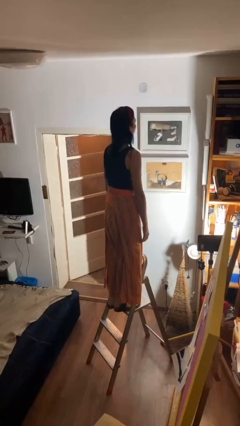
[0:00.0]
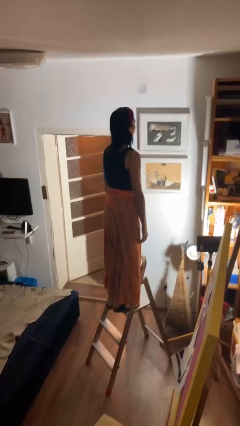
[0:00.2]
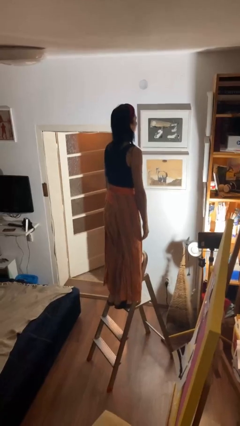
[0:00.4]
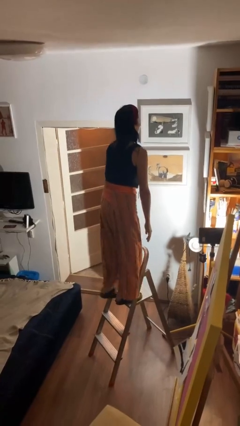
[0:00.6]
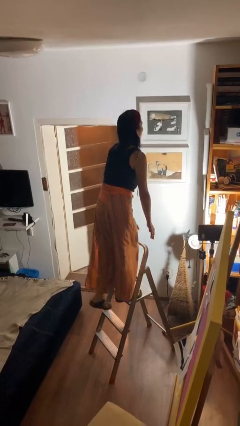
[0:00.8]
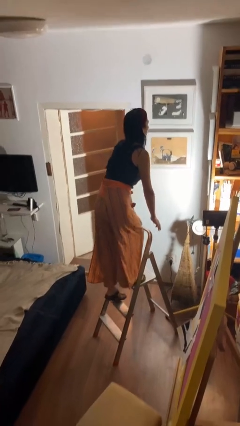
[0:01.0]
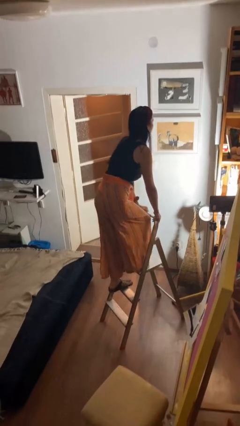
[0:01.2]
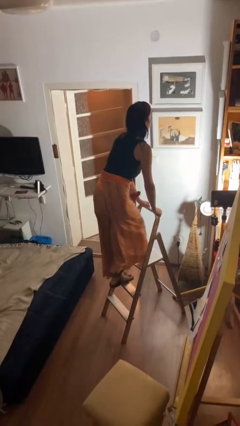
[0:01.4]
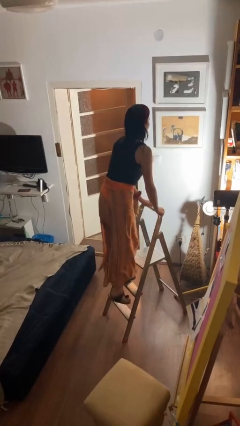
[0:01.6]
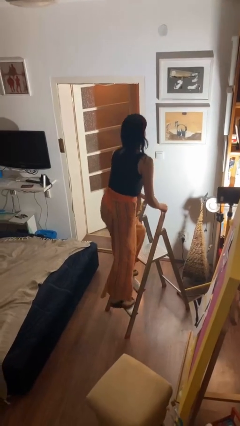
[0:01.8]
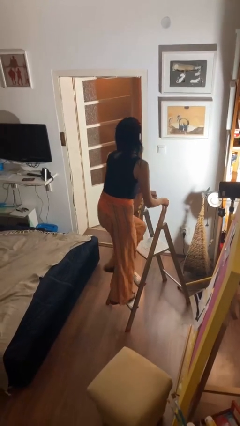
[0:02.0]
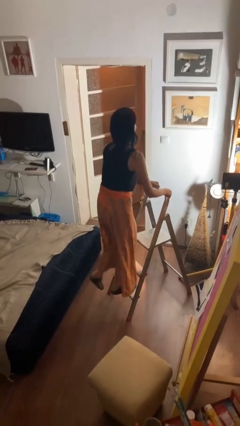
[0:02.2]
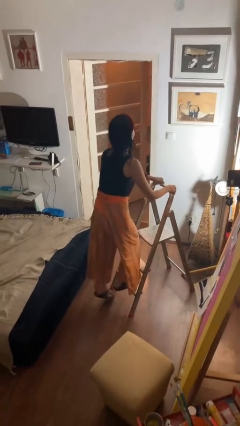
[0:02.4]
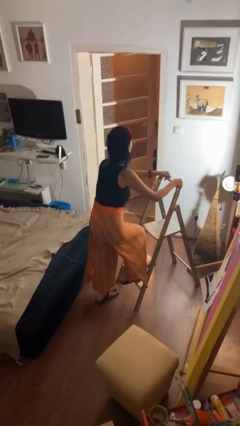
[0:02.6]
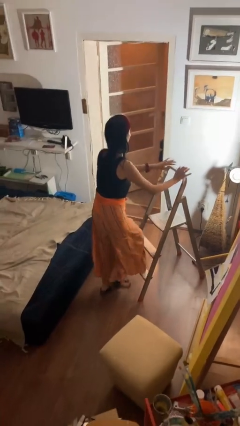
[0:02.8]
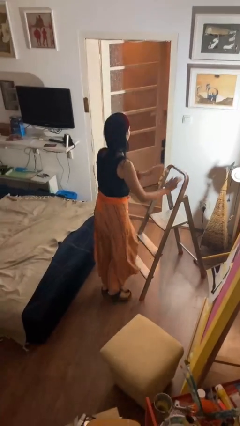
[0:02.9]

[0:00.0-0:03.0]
person climbs down ladder

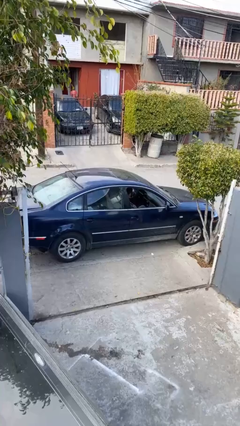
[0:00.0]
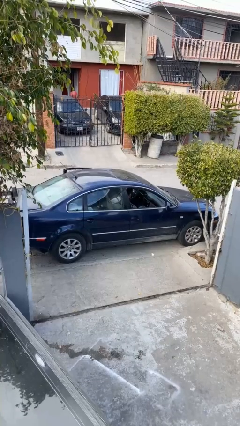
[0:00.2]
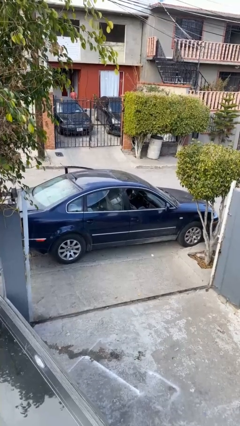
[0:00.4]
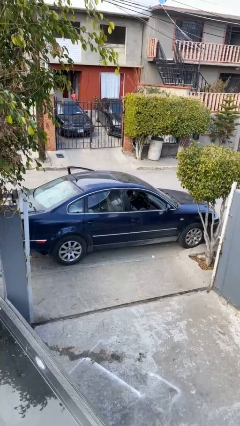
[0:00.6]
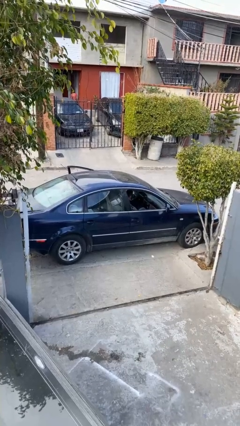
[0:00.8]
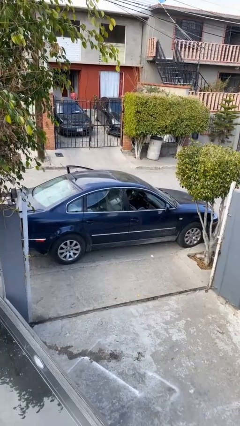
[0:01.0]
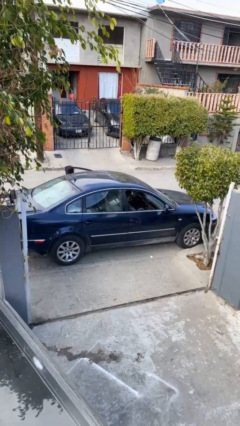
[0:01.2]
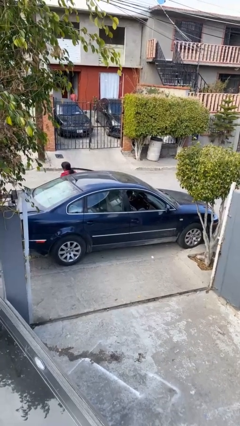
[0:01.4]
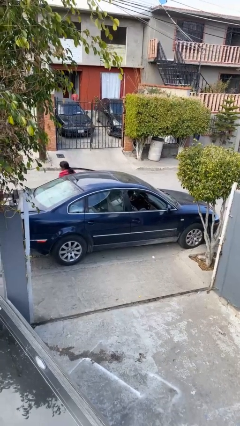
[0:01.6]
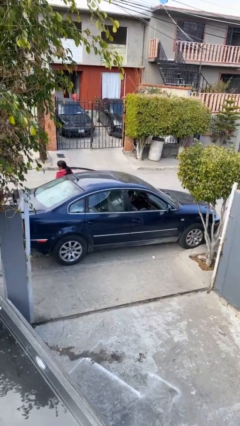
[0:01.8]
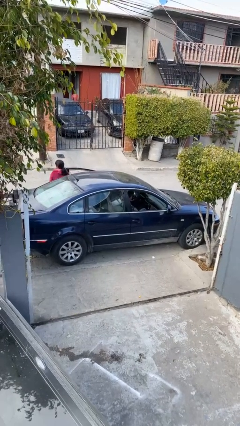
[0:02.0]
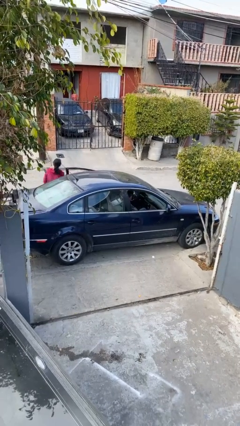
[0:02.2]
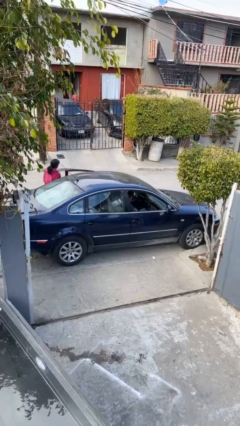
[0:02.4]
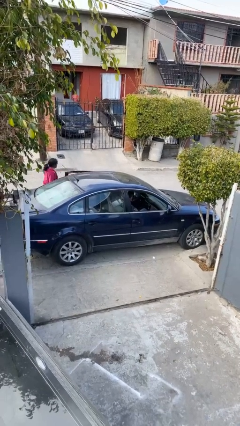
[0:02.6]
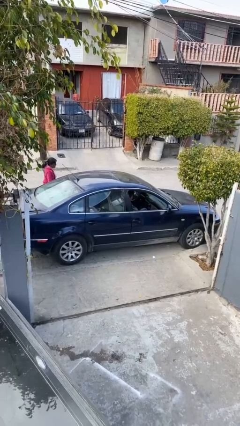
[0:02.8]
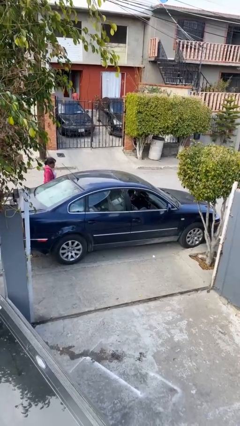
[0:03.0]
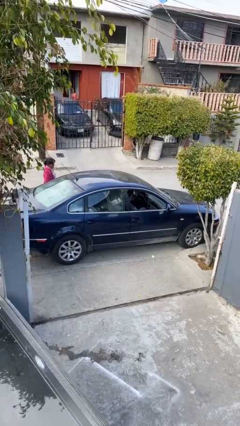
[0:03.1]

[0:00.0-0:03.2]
car drops off person

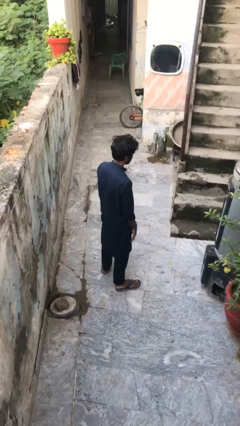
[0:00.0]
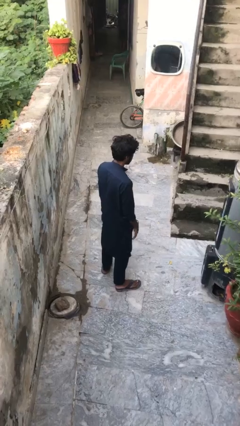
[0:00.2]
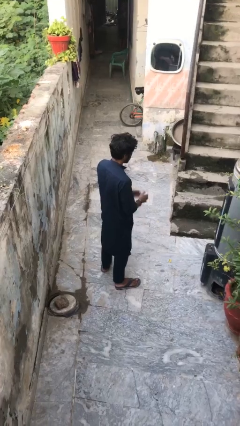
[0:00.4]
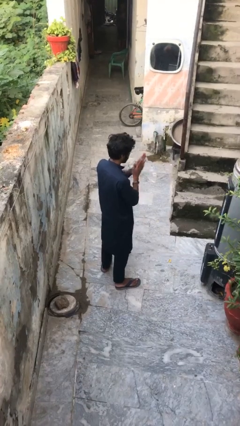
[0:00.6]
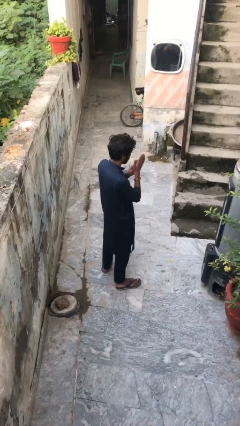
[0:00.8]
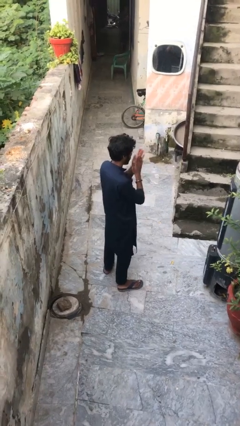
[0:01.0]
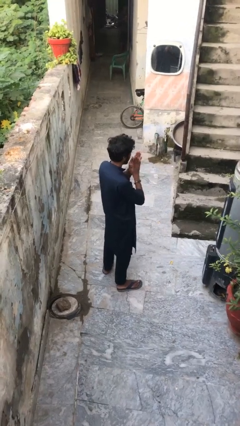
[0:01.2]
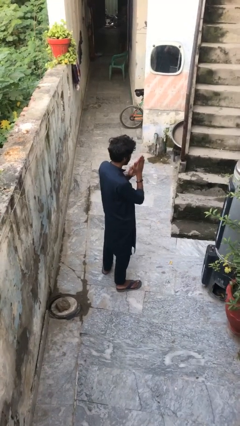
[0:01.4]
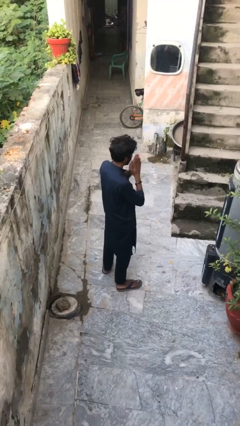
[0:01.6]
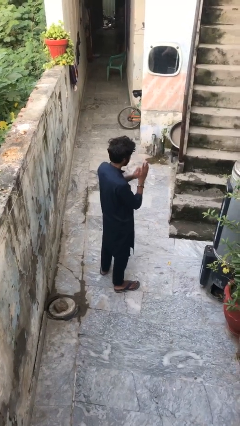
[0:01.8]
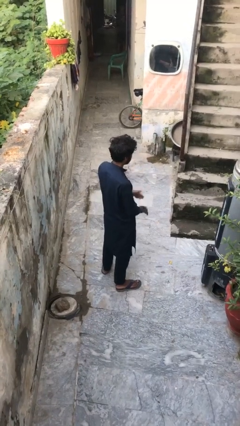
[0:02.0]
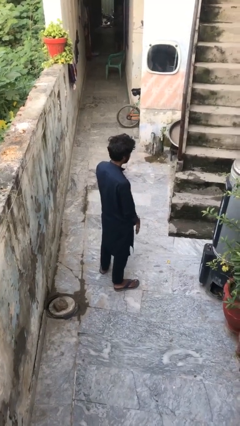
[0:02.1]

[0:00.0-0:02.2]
person blows into hands

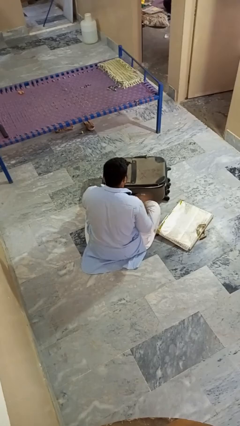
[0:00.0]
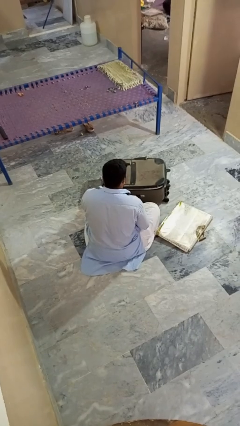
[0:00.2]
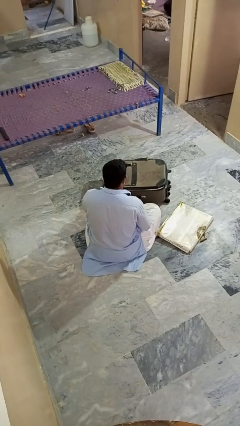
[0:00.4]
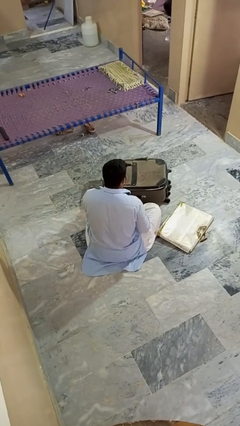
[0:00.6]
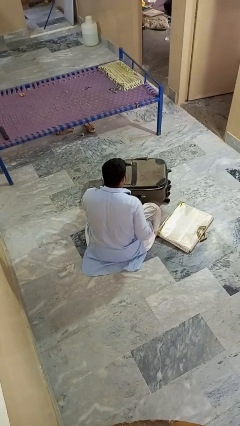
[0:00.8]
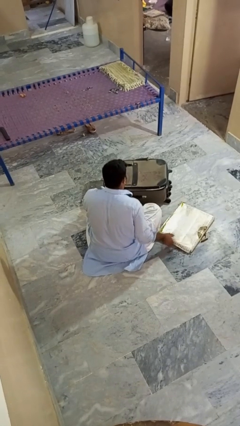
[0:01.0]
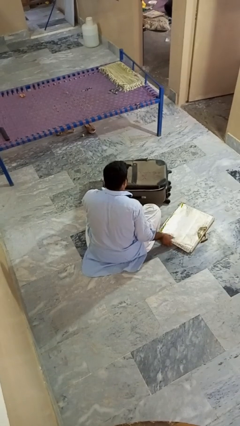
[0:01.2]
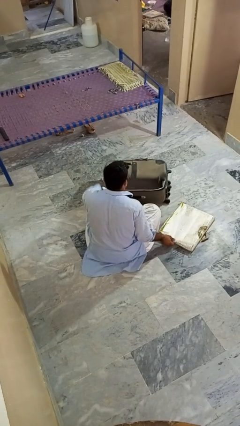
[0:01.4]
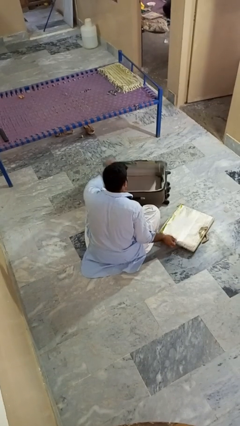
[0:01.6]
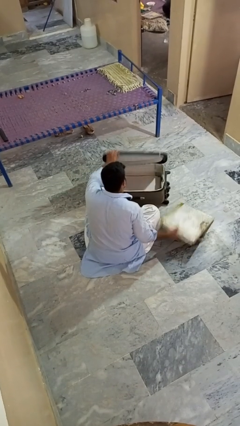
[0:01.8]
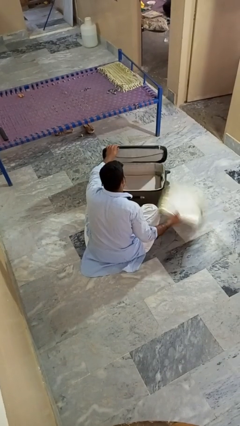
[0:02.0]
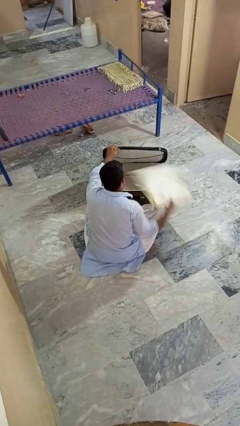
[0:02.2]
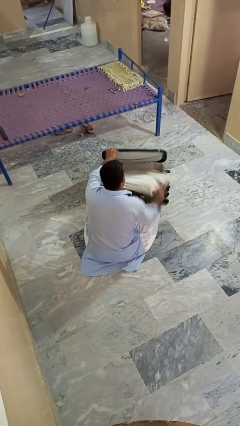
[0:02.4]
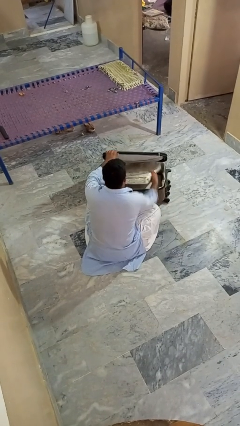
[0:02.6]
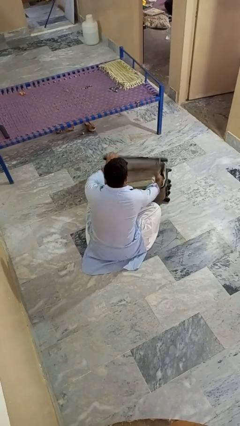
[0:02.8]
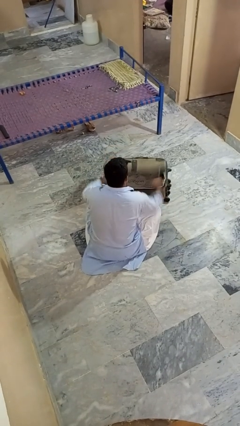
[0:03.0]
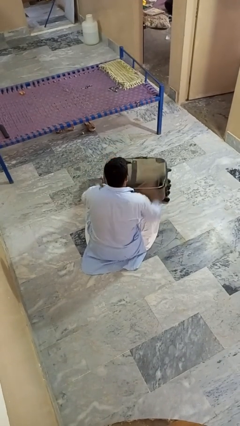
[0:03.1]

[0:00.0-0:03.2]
person puts object into bag

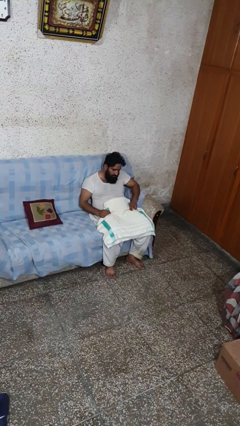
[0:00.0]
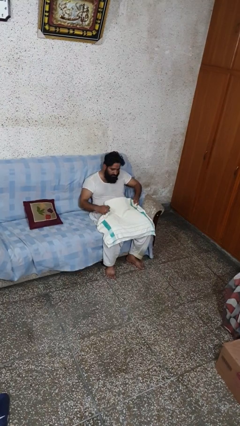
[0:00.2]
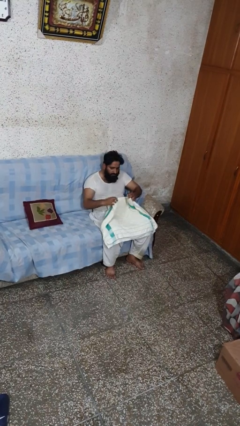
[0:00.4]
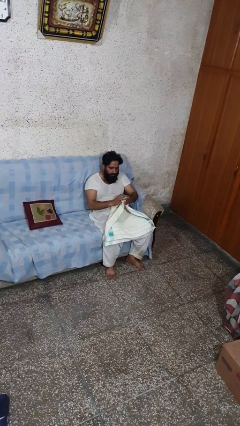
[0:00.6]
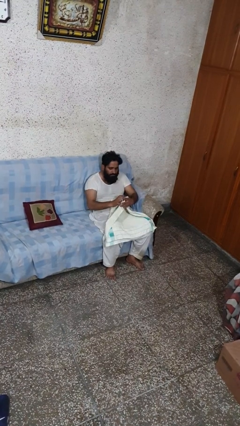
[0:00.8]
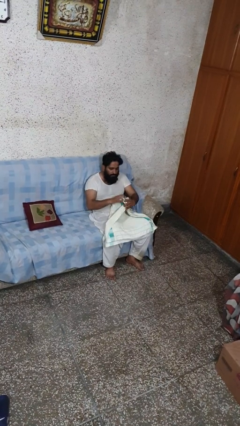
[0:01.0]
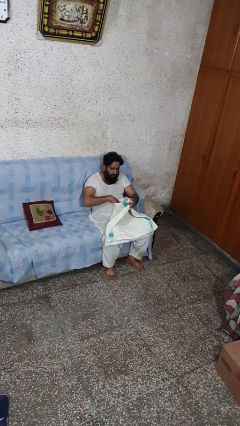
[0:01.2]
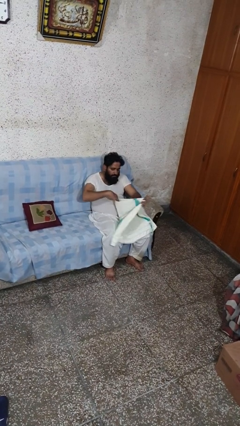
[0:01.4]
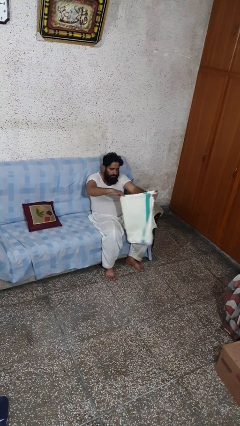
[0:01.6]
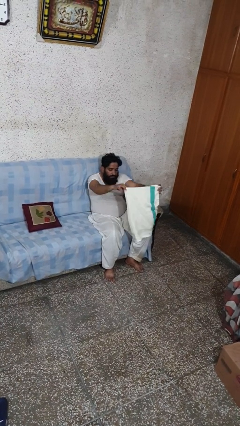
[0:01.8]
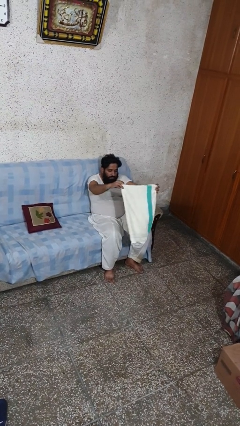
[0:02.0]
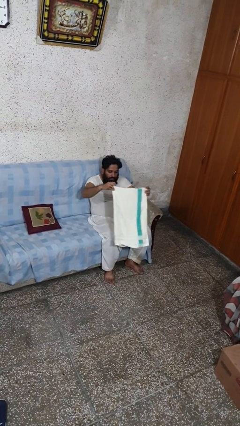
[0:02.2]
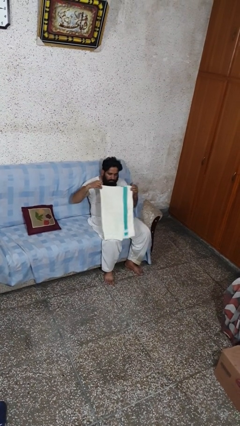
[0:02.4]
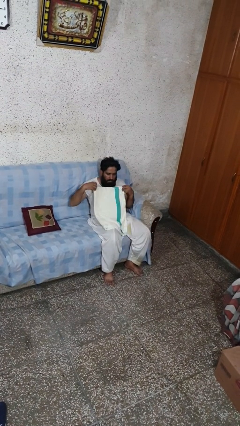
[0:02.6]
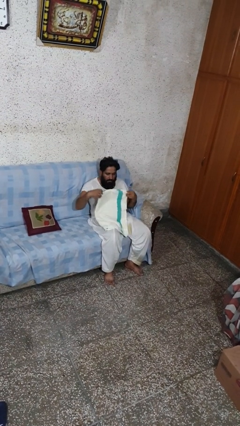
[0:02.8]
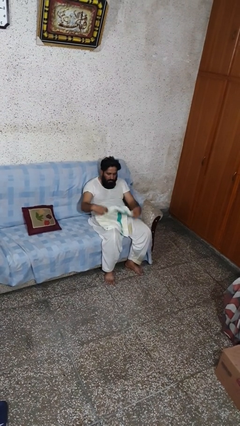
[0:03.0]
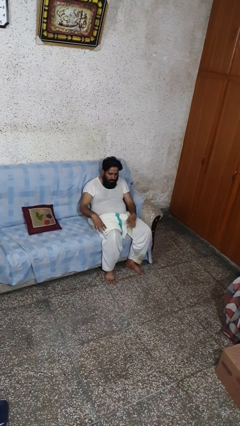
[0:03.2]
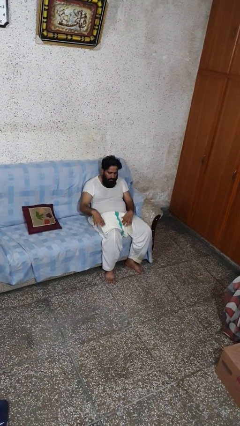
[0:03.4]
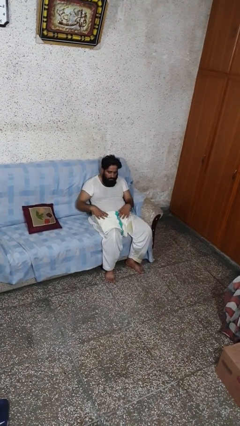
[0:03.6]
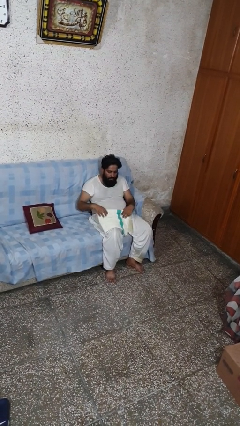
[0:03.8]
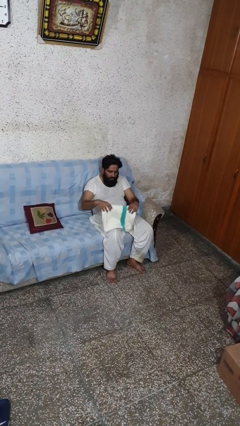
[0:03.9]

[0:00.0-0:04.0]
person folds towel

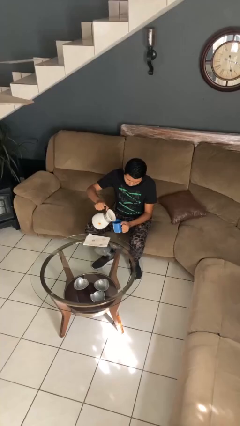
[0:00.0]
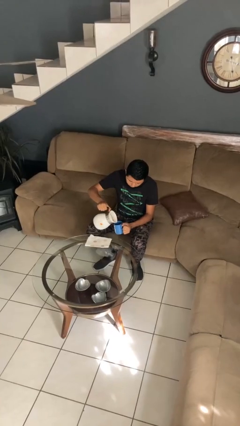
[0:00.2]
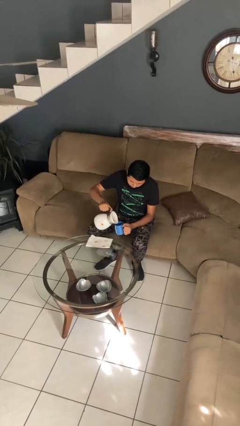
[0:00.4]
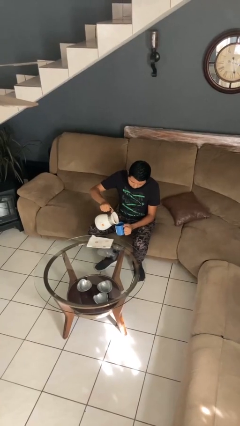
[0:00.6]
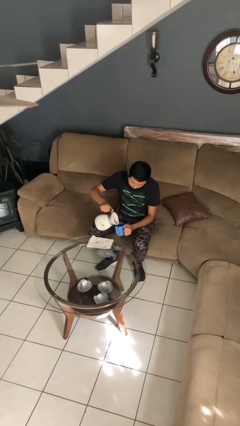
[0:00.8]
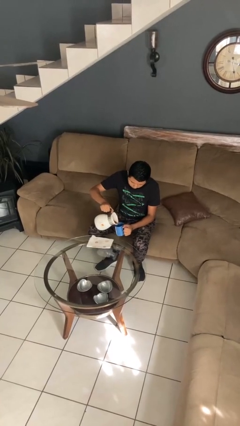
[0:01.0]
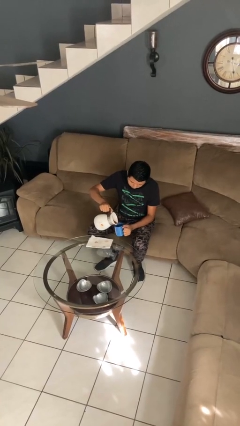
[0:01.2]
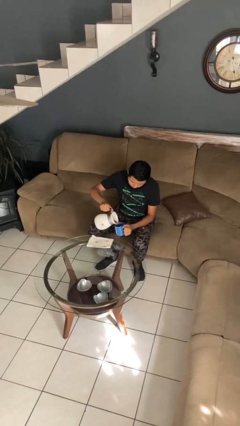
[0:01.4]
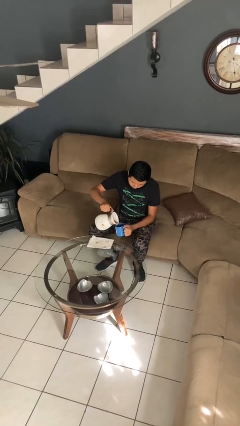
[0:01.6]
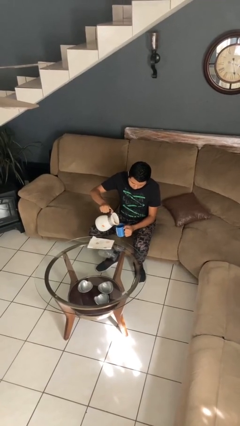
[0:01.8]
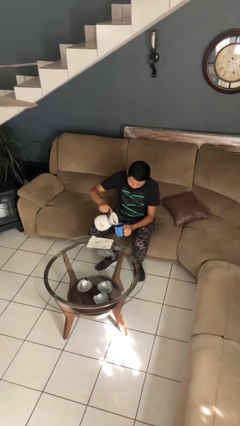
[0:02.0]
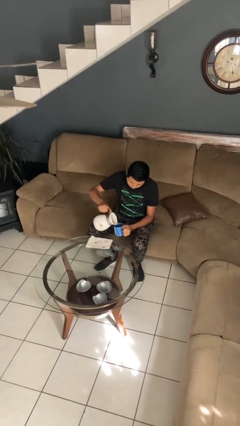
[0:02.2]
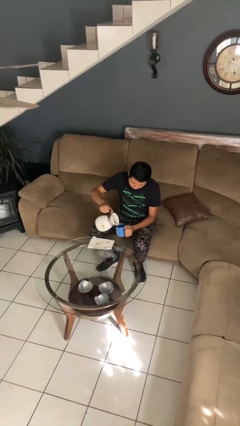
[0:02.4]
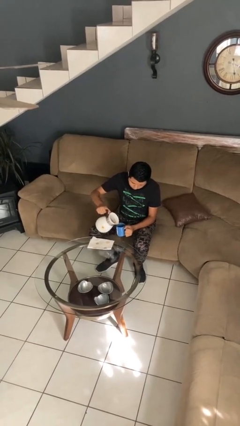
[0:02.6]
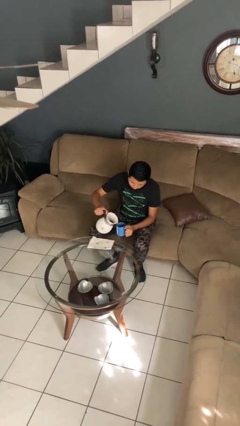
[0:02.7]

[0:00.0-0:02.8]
person pours coffee into mug
